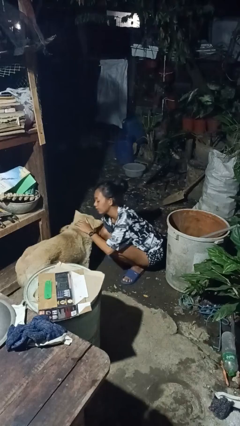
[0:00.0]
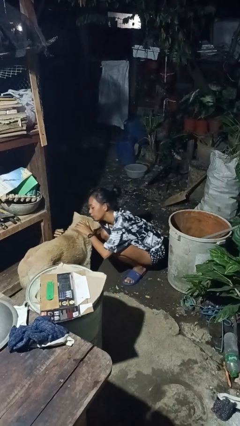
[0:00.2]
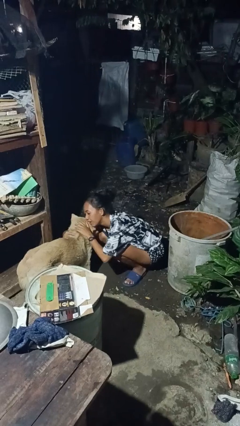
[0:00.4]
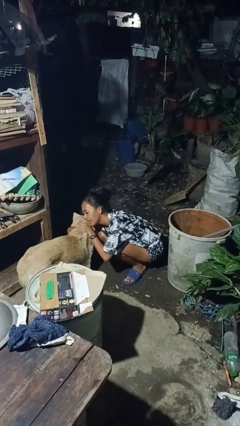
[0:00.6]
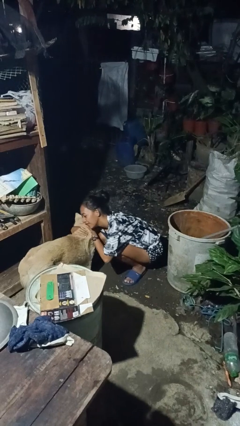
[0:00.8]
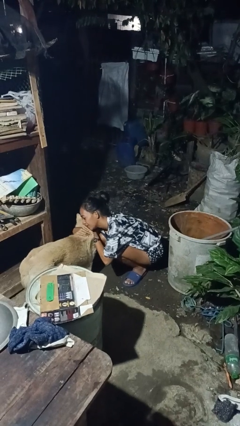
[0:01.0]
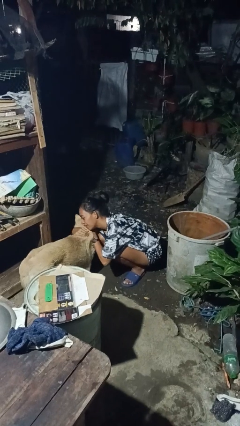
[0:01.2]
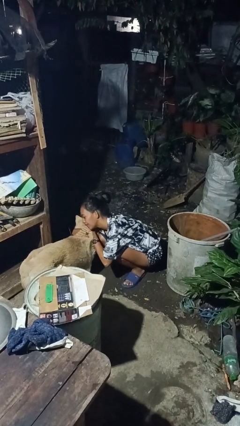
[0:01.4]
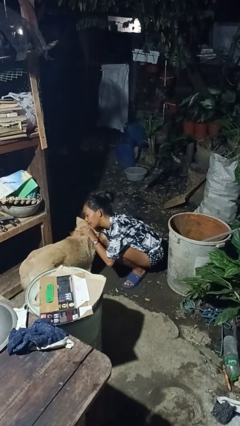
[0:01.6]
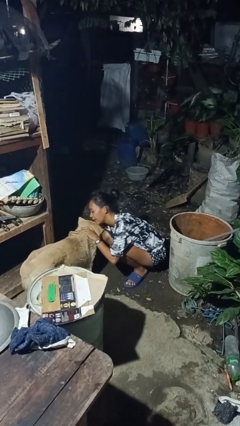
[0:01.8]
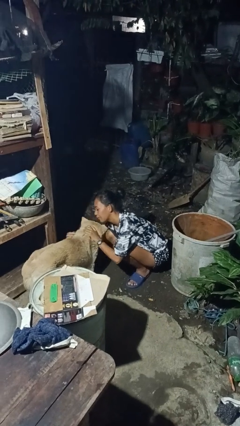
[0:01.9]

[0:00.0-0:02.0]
person hugs dog

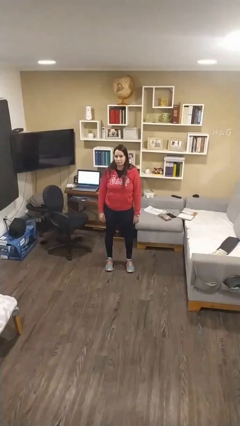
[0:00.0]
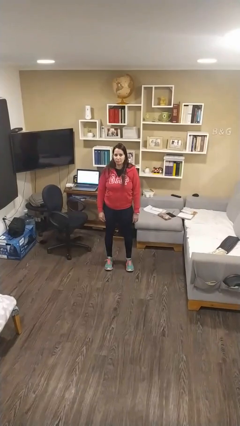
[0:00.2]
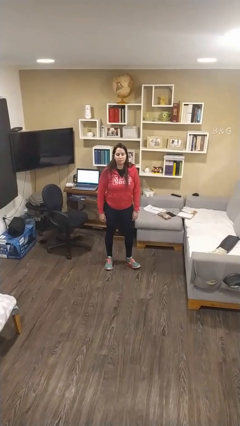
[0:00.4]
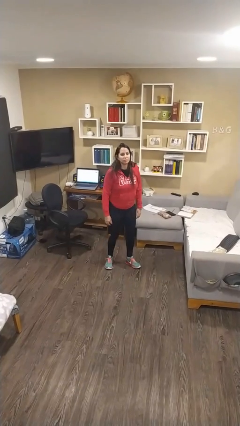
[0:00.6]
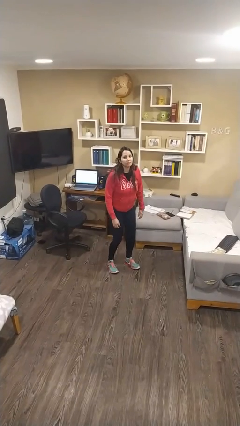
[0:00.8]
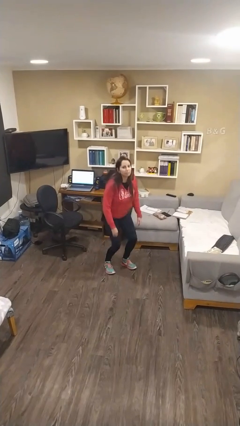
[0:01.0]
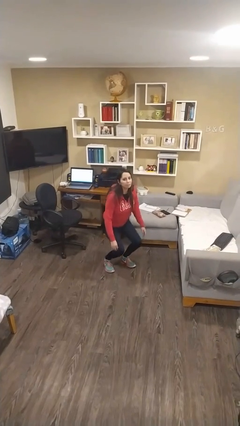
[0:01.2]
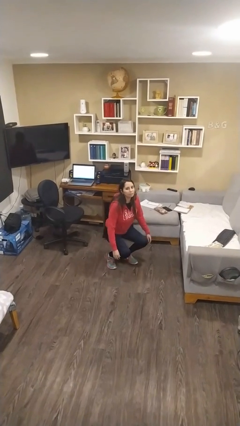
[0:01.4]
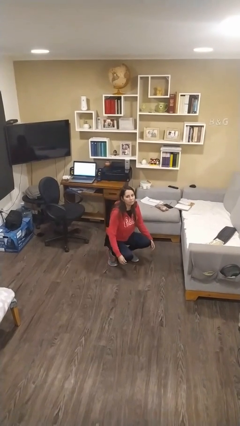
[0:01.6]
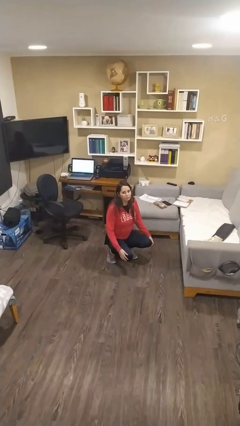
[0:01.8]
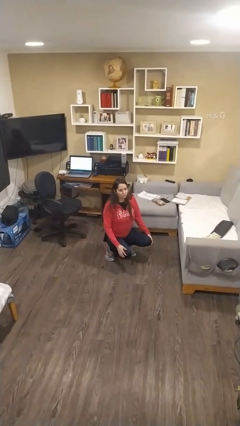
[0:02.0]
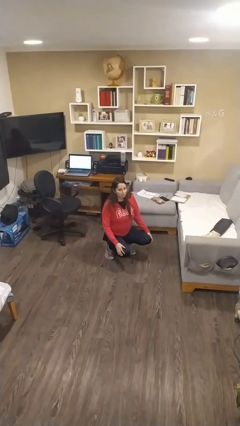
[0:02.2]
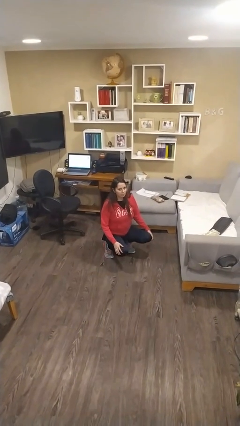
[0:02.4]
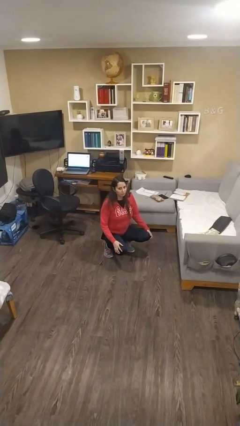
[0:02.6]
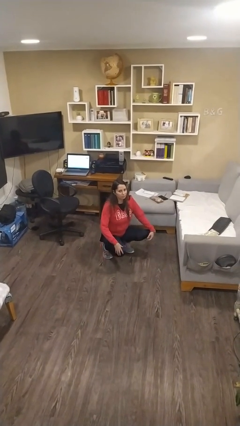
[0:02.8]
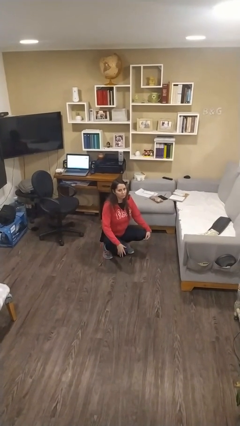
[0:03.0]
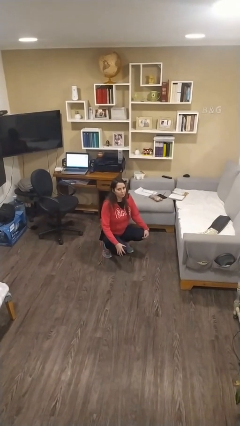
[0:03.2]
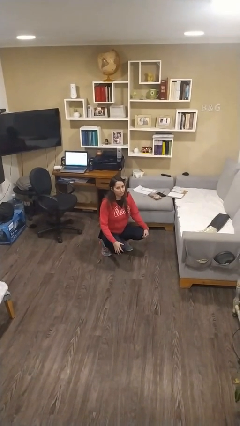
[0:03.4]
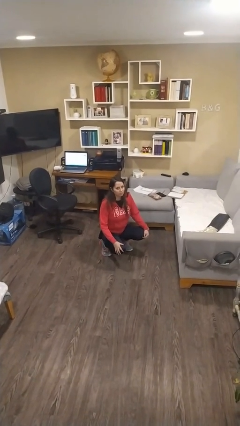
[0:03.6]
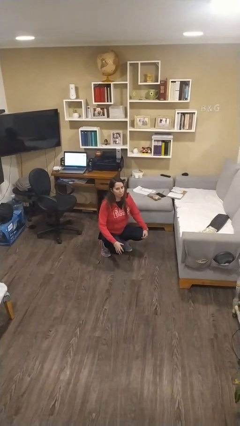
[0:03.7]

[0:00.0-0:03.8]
person squats

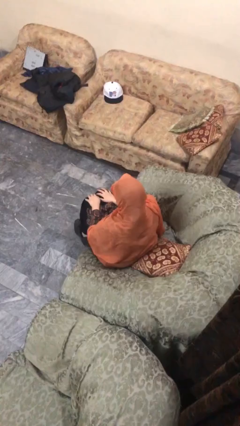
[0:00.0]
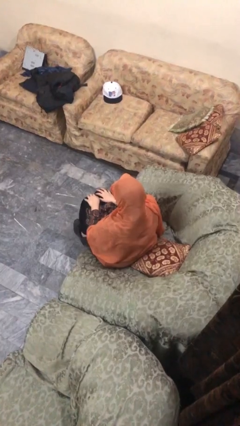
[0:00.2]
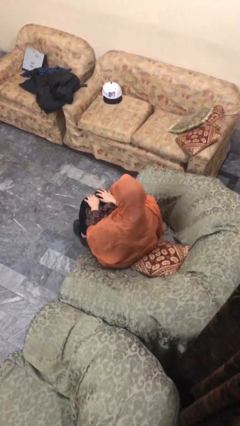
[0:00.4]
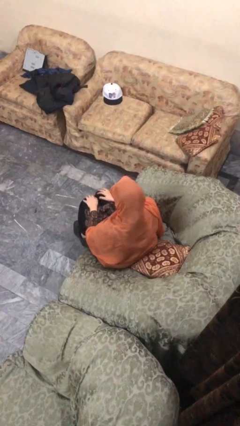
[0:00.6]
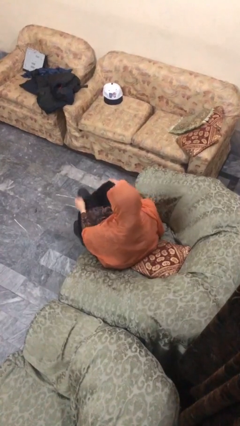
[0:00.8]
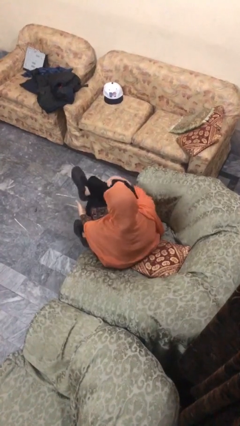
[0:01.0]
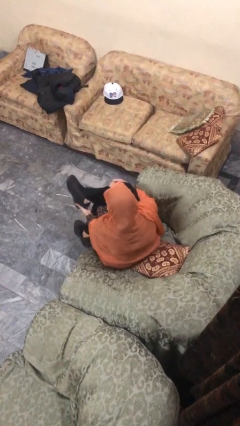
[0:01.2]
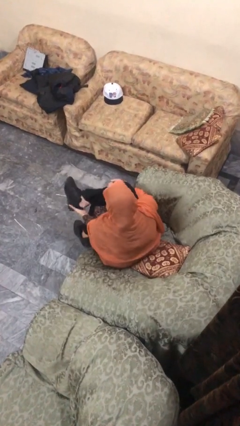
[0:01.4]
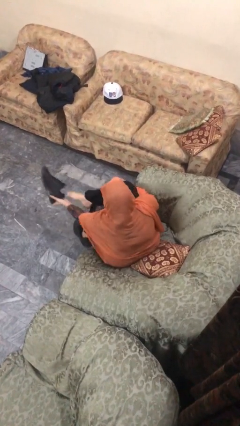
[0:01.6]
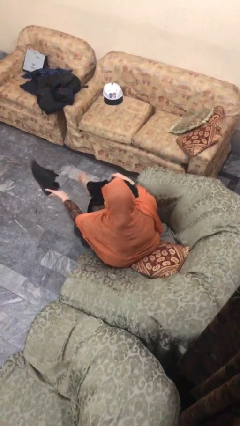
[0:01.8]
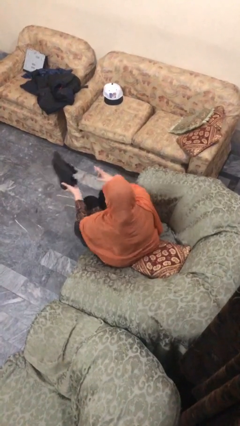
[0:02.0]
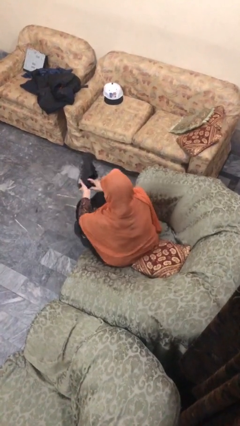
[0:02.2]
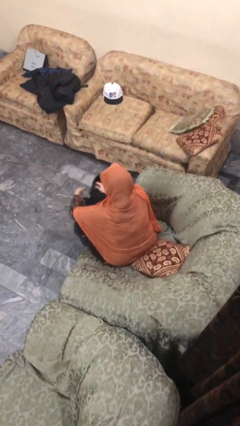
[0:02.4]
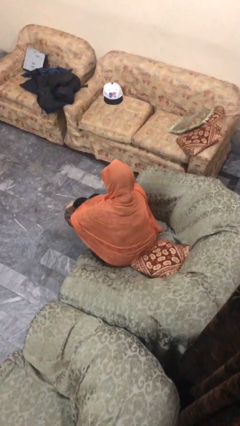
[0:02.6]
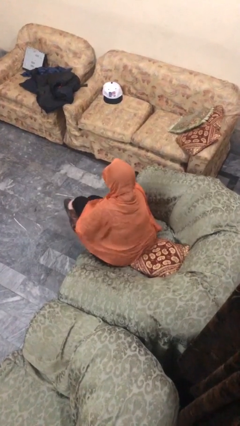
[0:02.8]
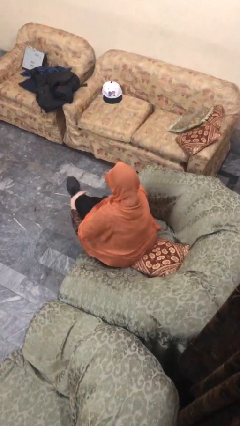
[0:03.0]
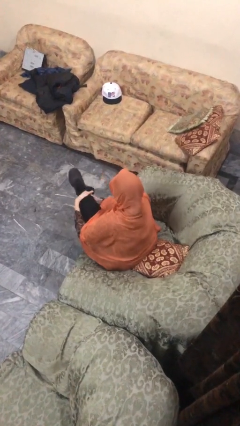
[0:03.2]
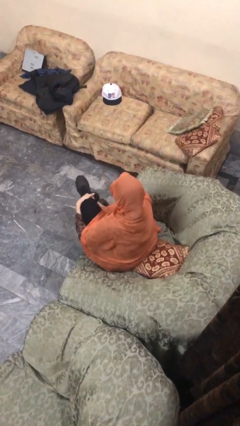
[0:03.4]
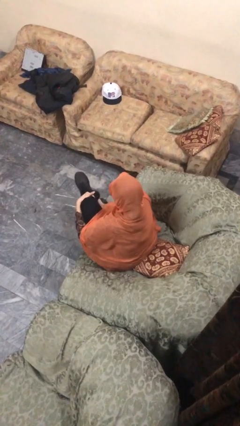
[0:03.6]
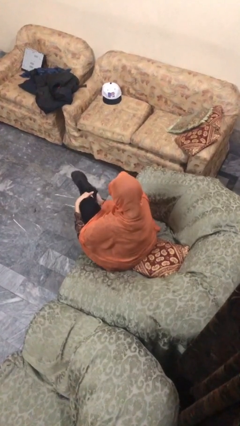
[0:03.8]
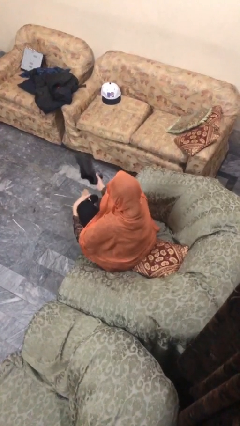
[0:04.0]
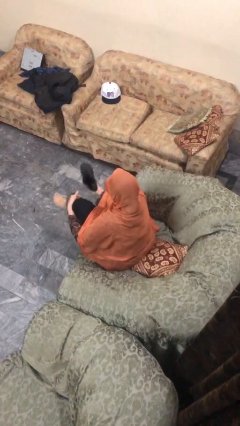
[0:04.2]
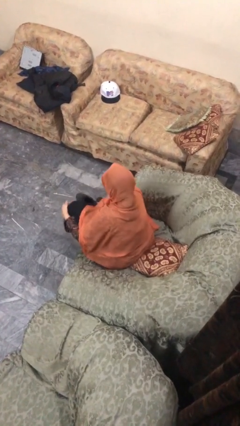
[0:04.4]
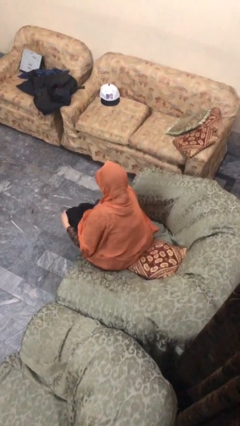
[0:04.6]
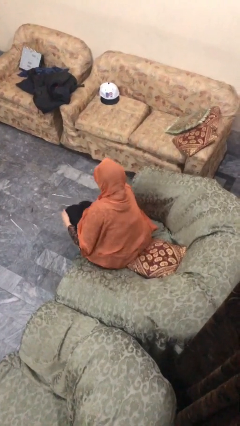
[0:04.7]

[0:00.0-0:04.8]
person takes off shoes

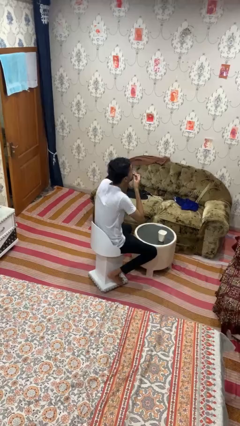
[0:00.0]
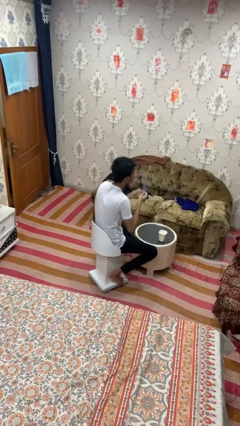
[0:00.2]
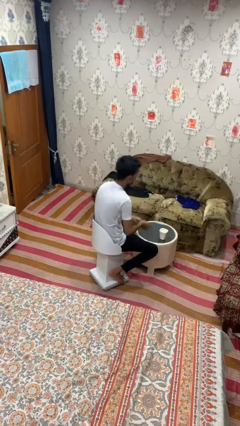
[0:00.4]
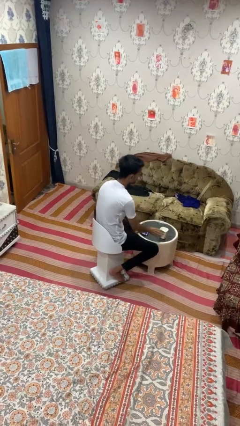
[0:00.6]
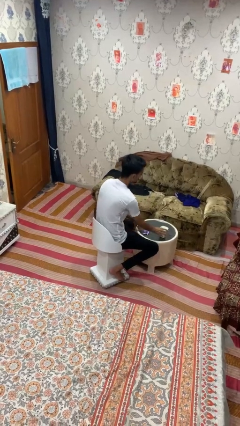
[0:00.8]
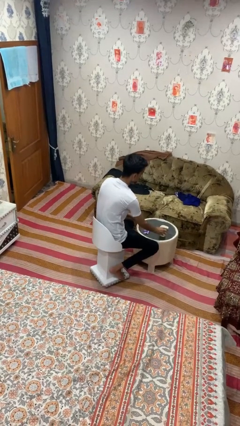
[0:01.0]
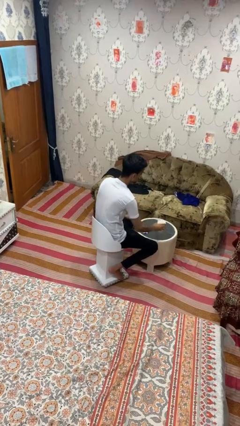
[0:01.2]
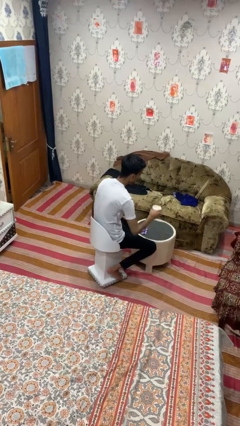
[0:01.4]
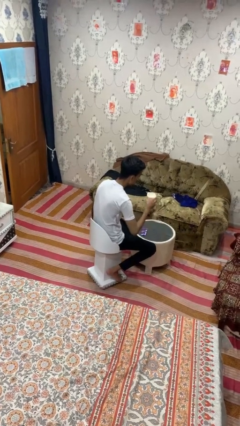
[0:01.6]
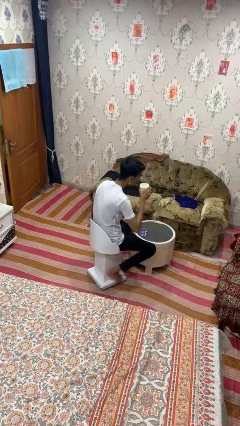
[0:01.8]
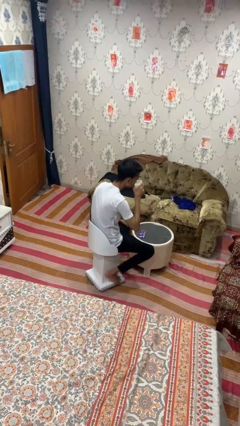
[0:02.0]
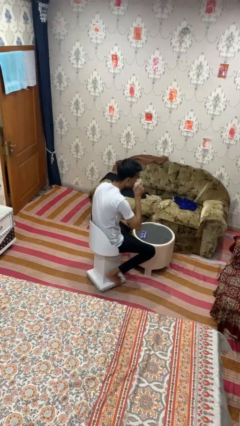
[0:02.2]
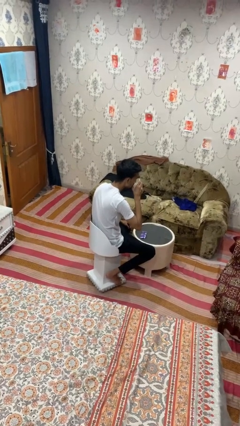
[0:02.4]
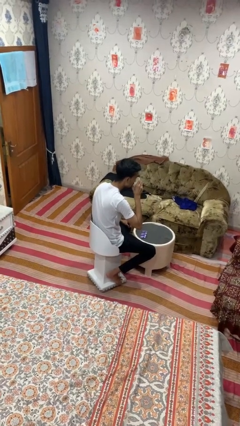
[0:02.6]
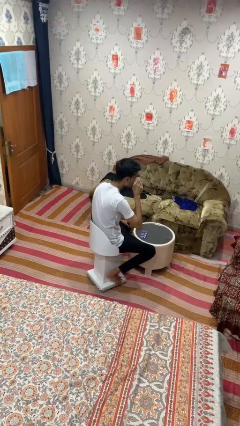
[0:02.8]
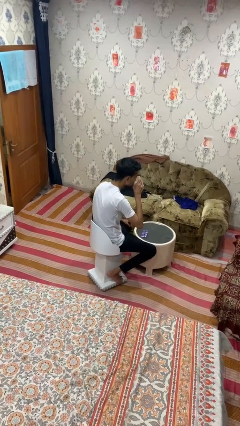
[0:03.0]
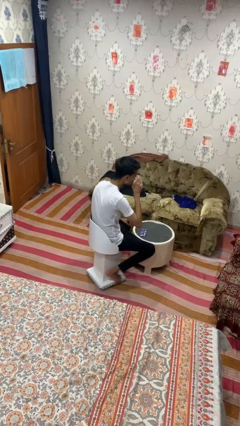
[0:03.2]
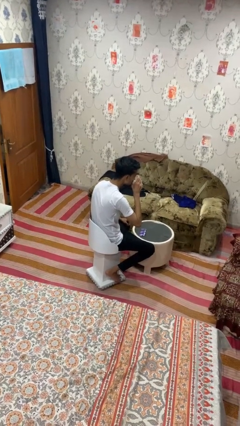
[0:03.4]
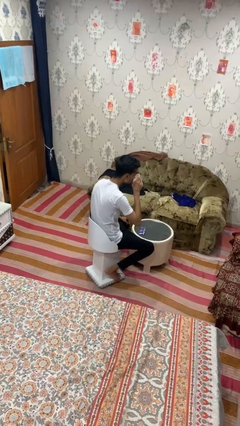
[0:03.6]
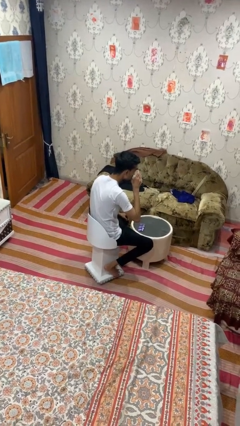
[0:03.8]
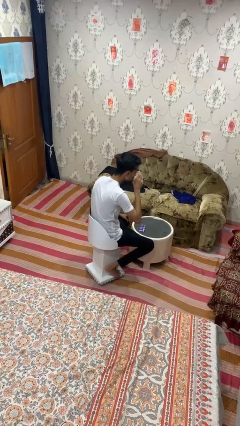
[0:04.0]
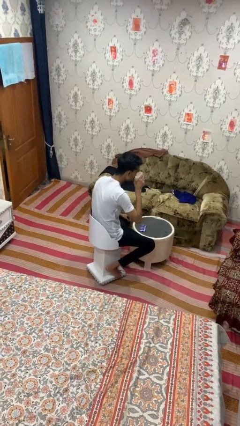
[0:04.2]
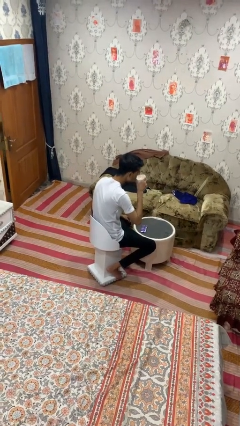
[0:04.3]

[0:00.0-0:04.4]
person drinks from cup

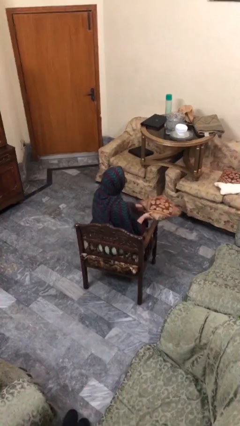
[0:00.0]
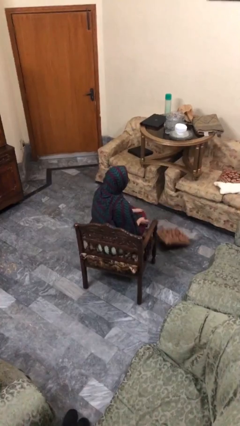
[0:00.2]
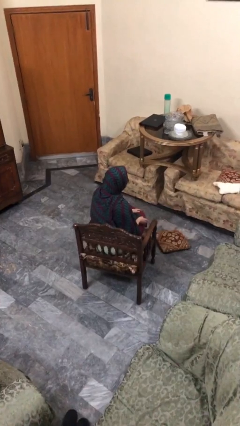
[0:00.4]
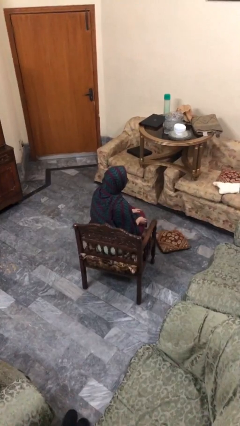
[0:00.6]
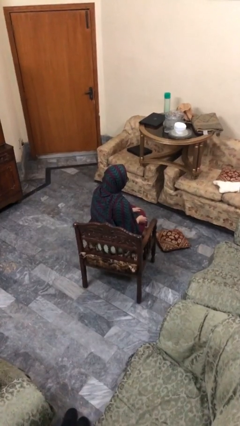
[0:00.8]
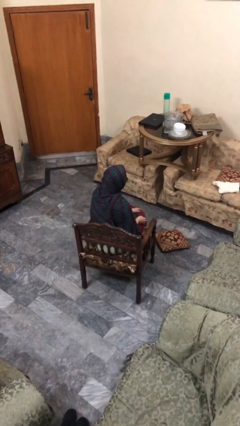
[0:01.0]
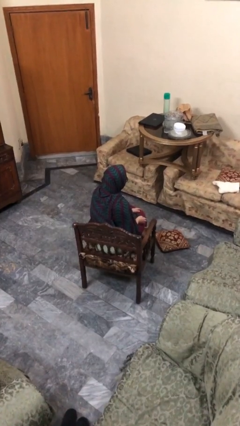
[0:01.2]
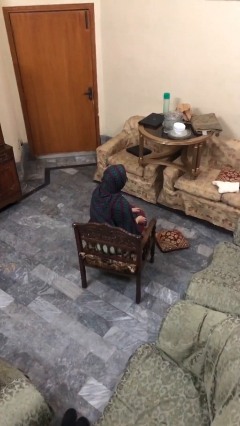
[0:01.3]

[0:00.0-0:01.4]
person drops object

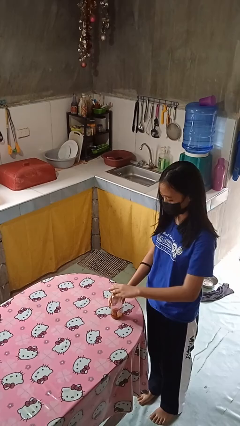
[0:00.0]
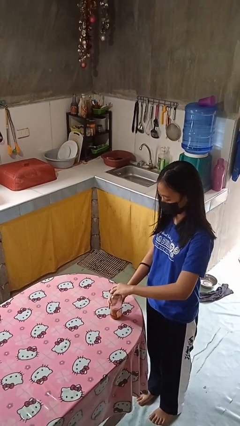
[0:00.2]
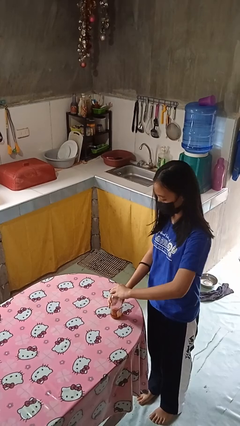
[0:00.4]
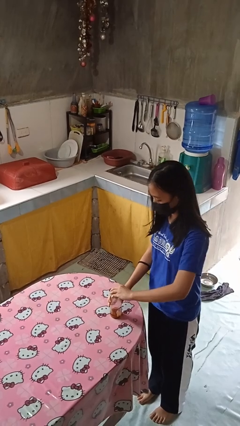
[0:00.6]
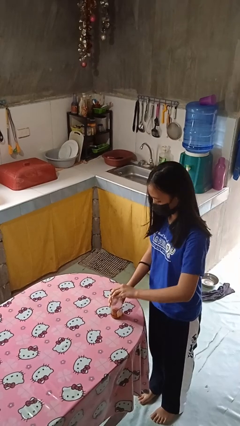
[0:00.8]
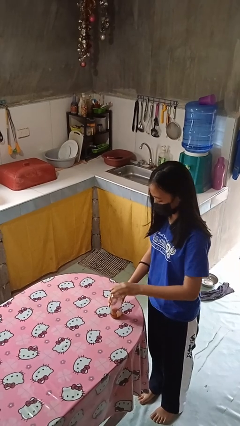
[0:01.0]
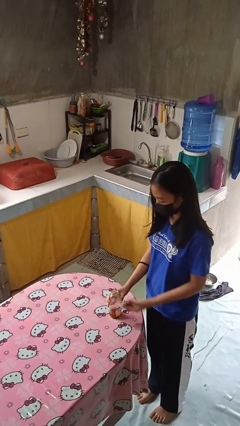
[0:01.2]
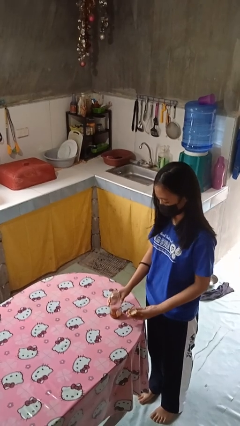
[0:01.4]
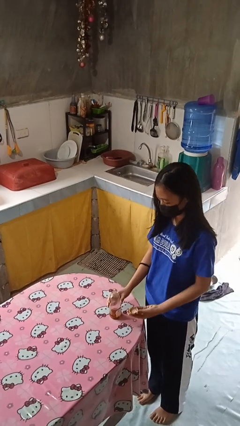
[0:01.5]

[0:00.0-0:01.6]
person opens jar
